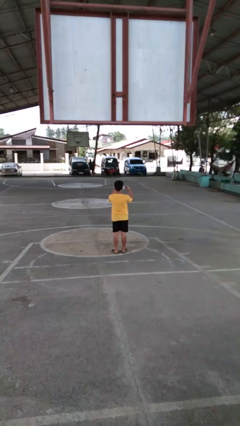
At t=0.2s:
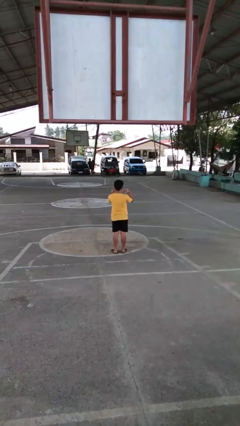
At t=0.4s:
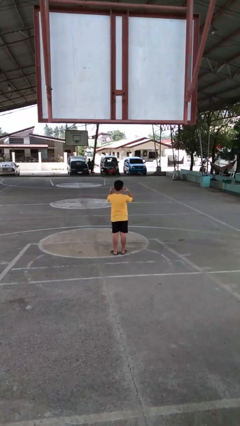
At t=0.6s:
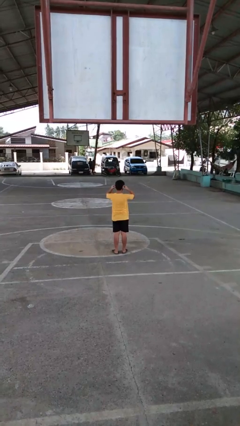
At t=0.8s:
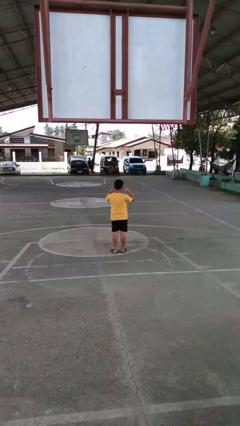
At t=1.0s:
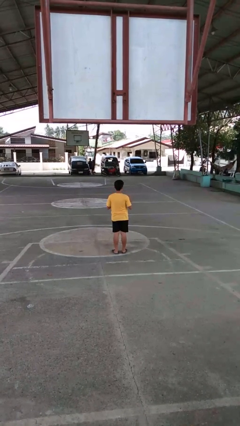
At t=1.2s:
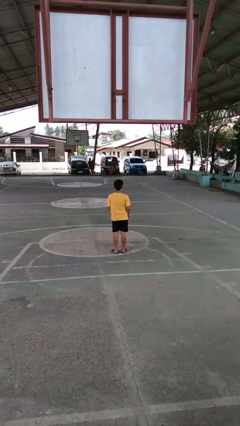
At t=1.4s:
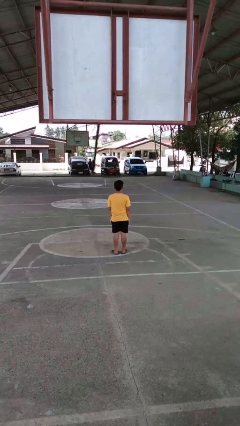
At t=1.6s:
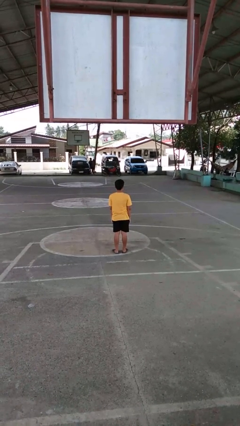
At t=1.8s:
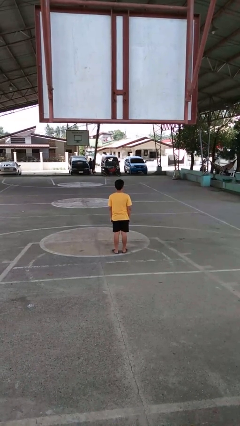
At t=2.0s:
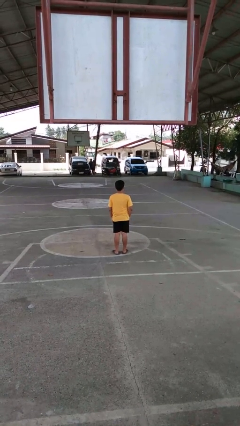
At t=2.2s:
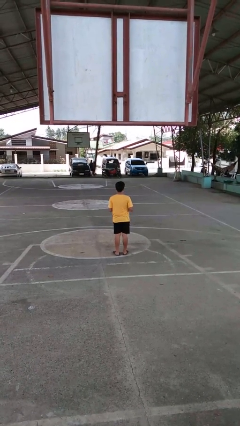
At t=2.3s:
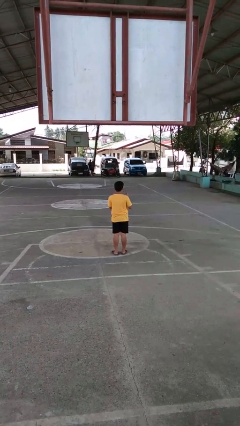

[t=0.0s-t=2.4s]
person puts on facemask

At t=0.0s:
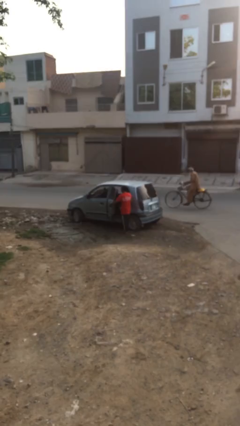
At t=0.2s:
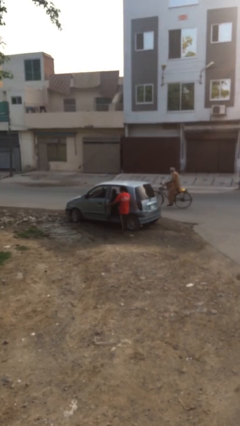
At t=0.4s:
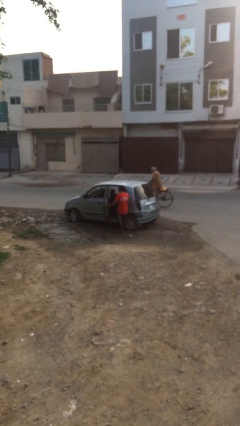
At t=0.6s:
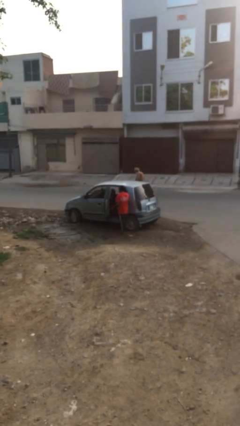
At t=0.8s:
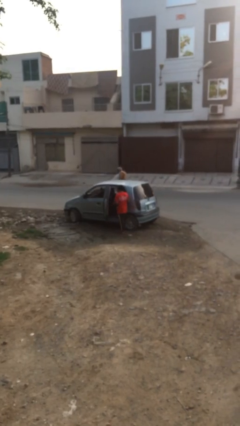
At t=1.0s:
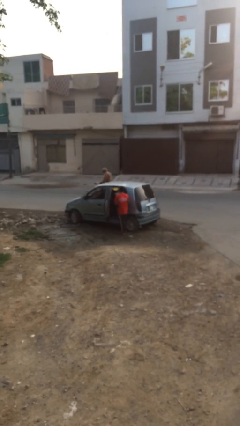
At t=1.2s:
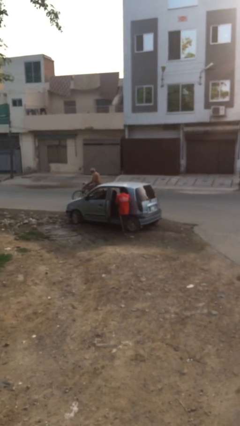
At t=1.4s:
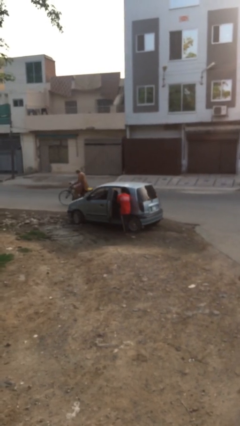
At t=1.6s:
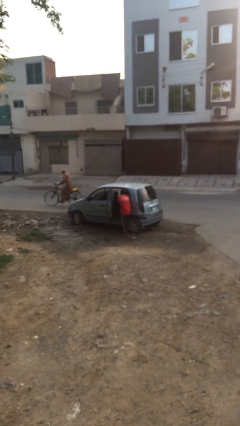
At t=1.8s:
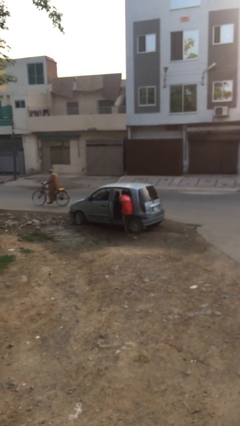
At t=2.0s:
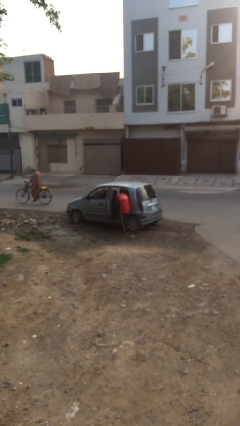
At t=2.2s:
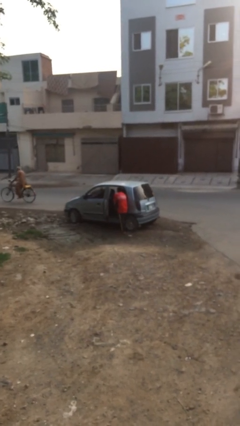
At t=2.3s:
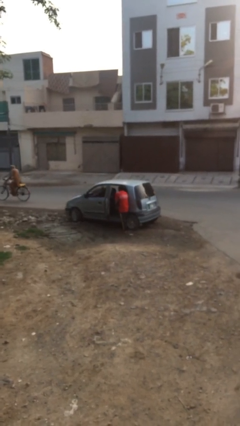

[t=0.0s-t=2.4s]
person loads car

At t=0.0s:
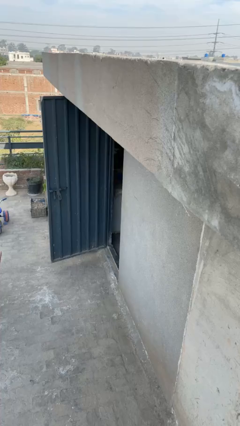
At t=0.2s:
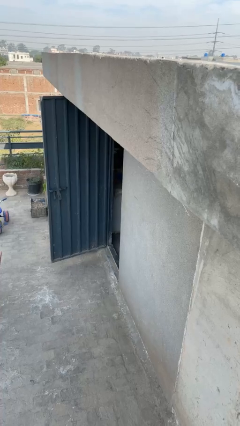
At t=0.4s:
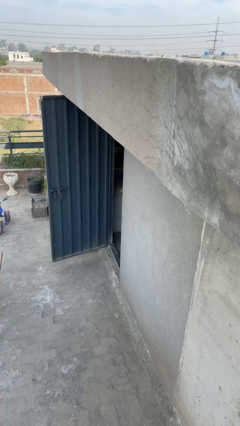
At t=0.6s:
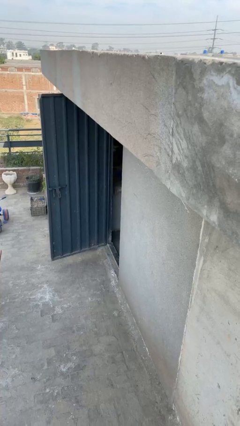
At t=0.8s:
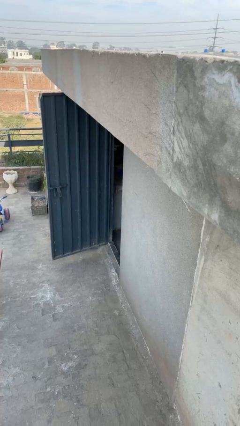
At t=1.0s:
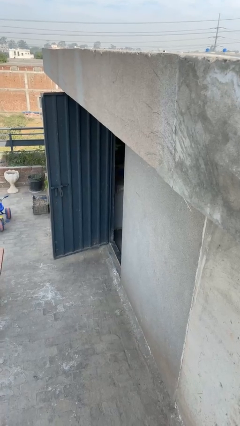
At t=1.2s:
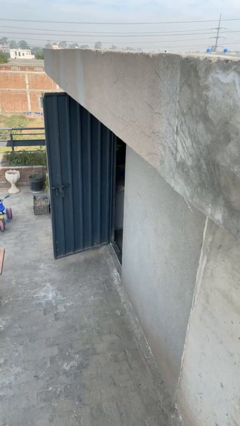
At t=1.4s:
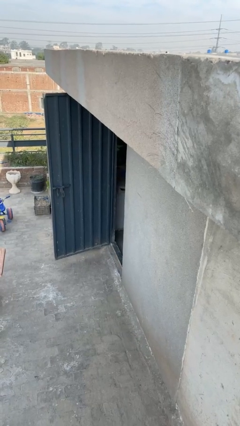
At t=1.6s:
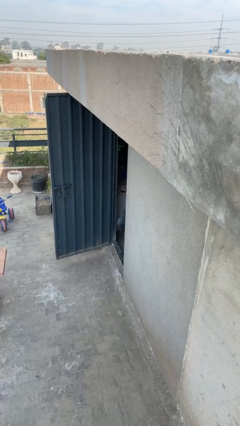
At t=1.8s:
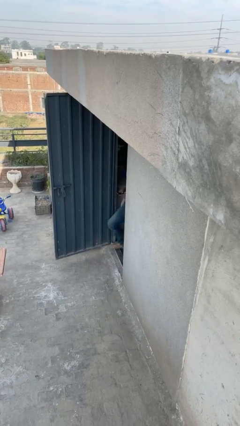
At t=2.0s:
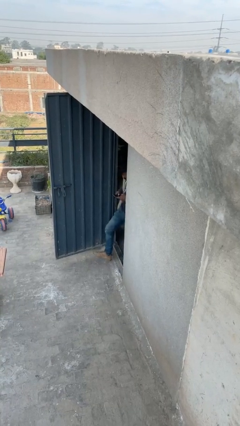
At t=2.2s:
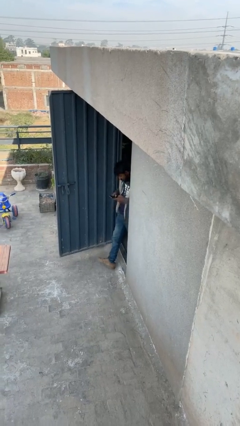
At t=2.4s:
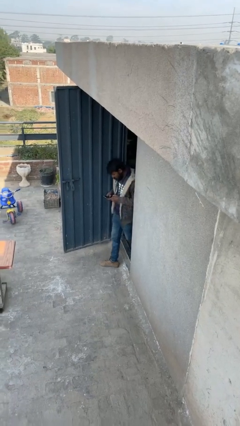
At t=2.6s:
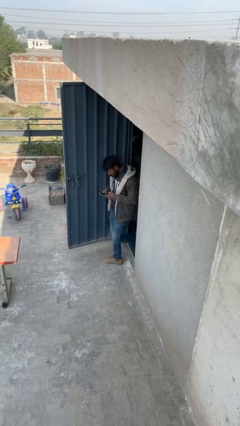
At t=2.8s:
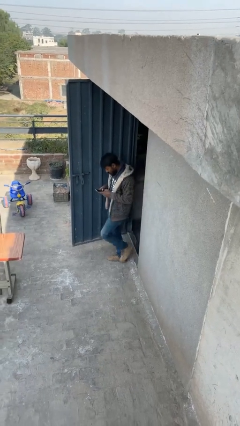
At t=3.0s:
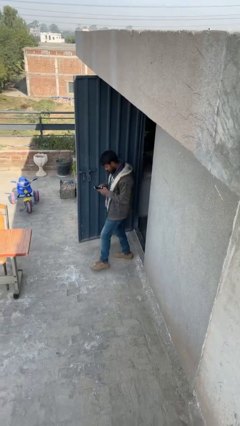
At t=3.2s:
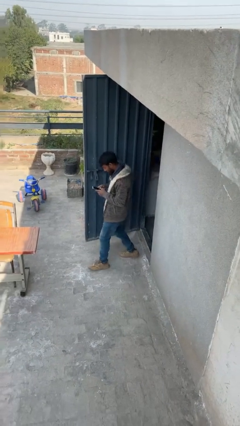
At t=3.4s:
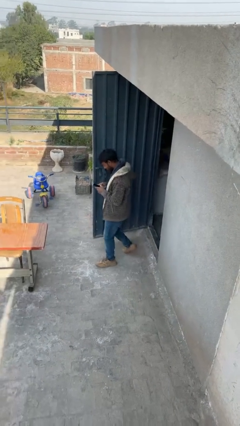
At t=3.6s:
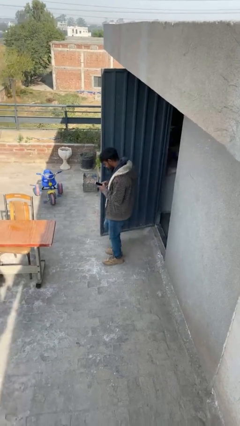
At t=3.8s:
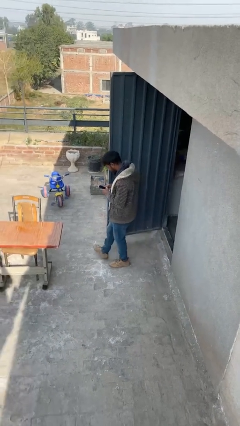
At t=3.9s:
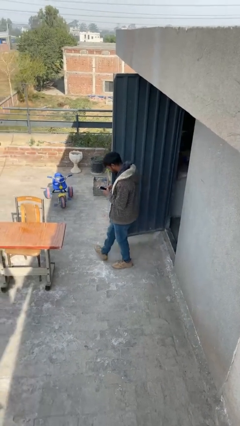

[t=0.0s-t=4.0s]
person enters scene through structure

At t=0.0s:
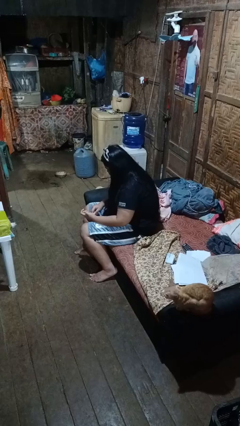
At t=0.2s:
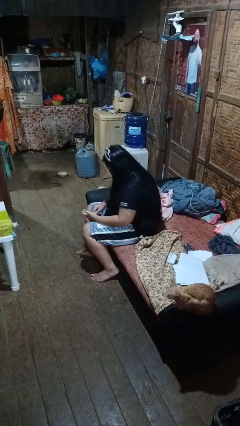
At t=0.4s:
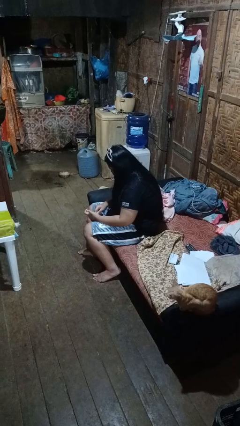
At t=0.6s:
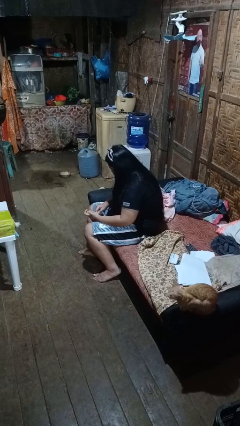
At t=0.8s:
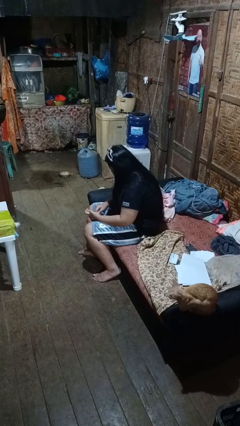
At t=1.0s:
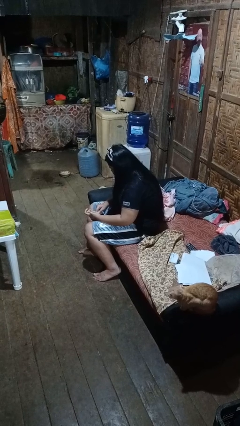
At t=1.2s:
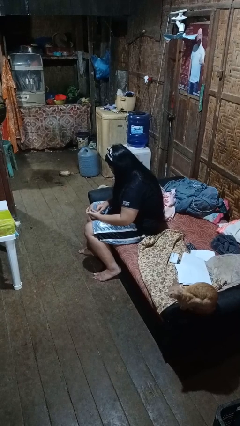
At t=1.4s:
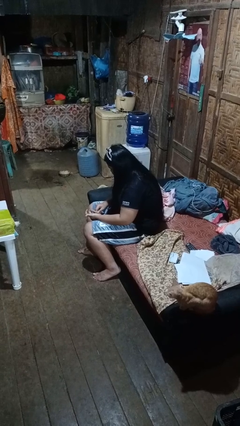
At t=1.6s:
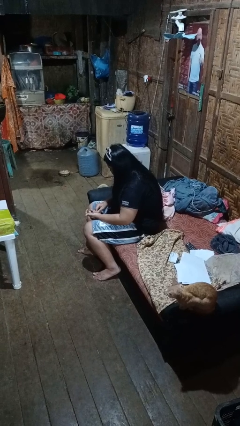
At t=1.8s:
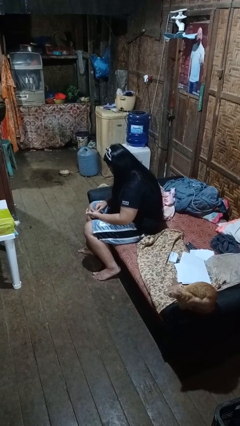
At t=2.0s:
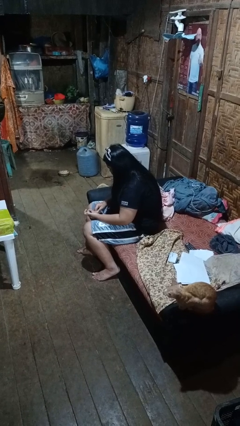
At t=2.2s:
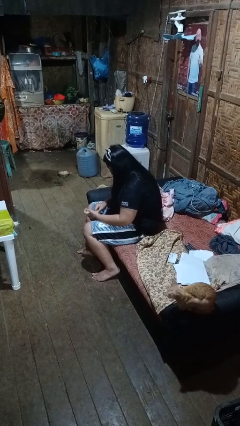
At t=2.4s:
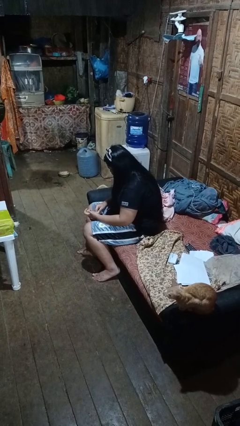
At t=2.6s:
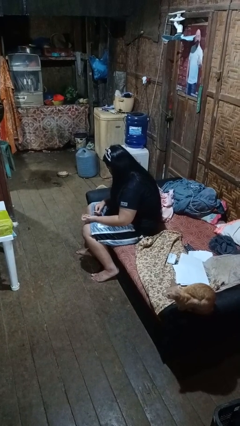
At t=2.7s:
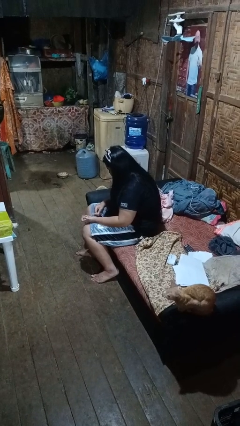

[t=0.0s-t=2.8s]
person files fingernails

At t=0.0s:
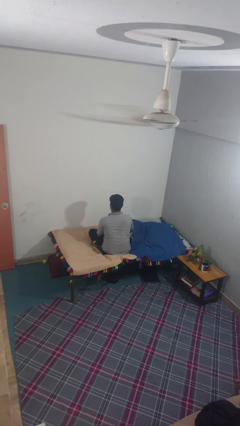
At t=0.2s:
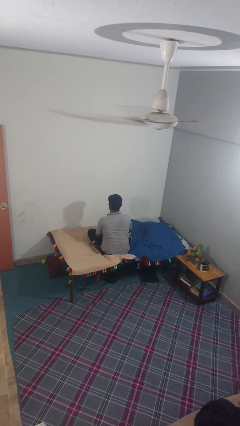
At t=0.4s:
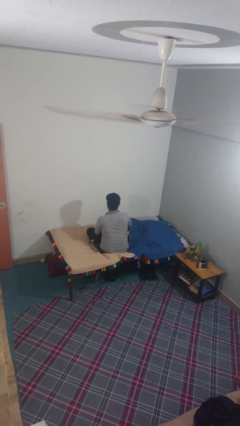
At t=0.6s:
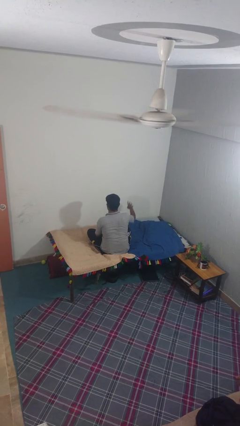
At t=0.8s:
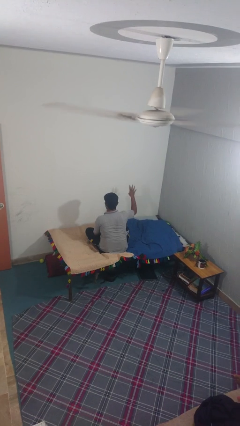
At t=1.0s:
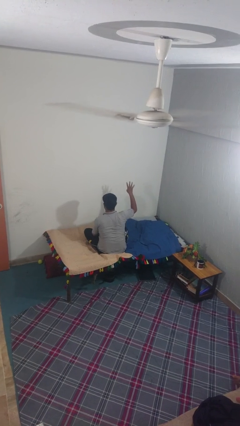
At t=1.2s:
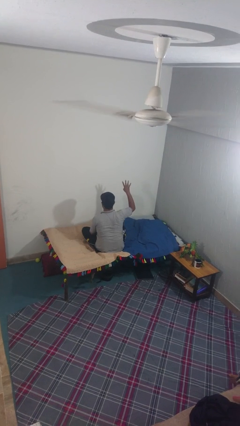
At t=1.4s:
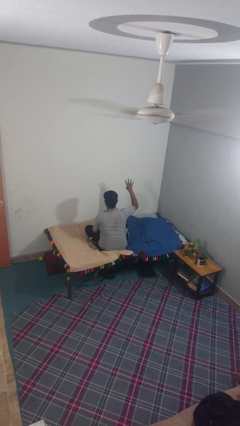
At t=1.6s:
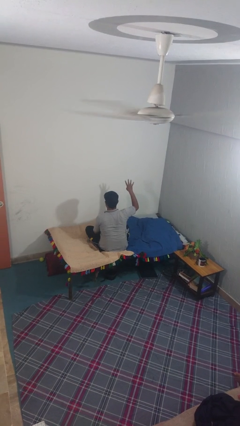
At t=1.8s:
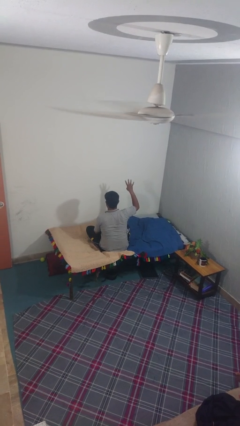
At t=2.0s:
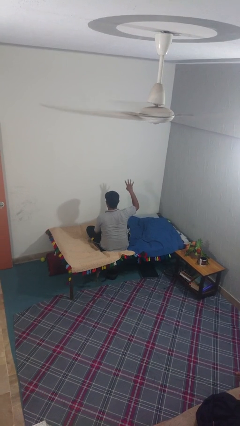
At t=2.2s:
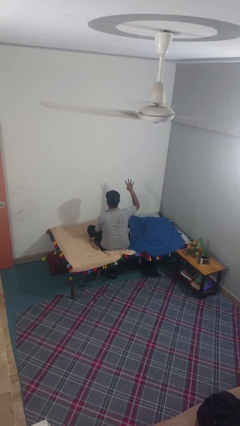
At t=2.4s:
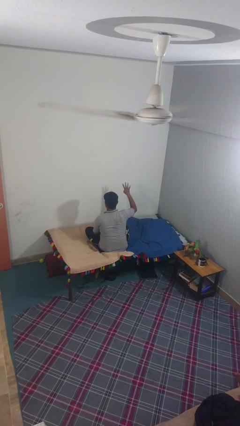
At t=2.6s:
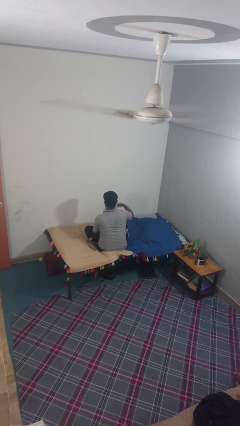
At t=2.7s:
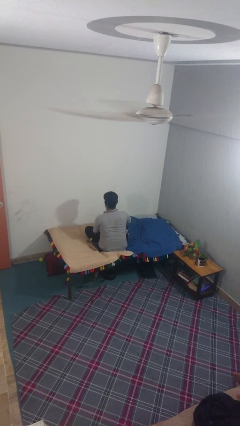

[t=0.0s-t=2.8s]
person gestures number four

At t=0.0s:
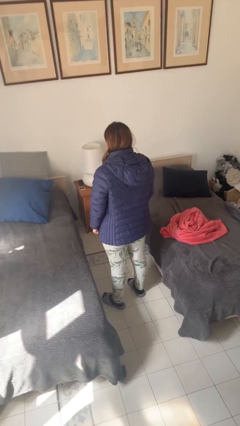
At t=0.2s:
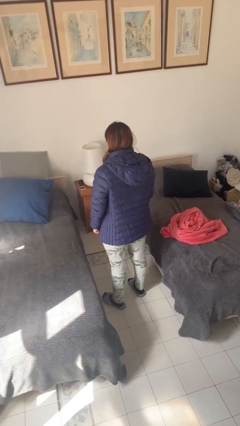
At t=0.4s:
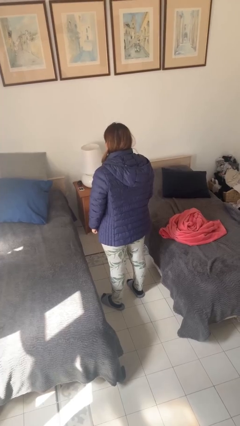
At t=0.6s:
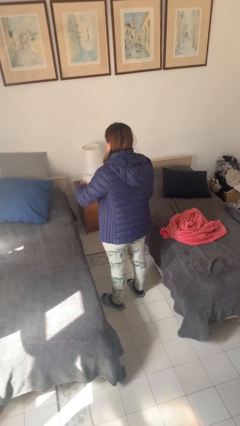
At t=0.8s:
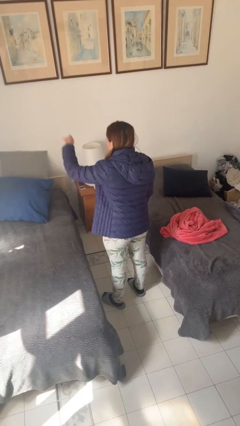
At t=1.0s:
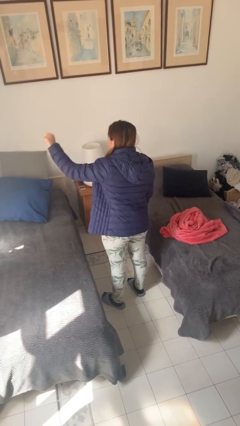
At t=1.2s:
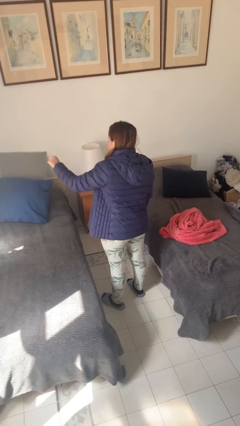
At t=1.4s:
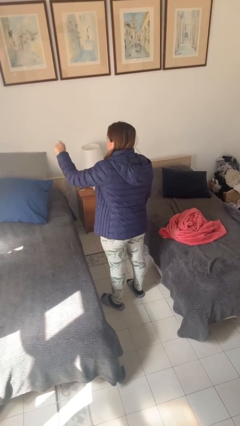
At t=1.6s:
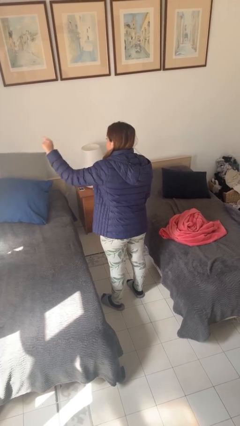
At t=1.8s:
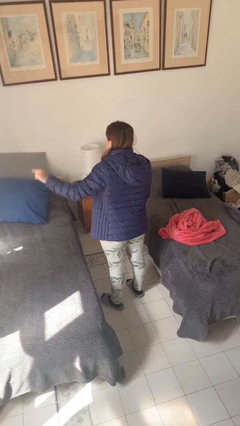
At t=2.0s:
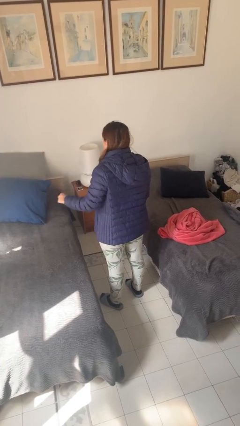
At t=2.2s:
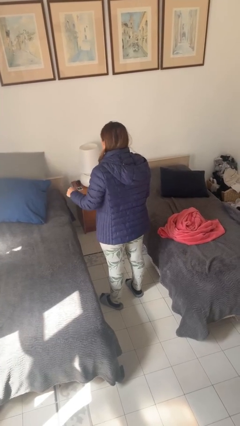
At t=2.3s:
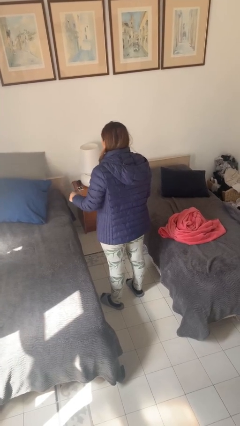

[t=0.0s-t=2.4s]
person gestures number three

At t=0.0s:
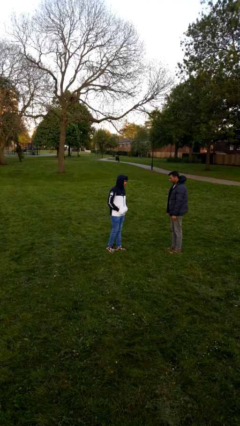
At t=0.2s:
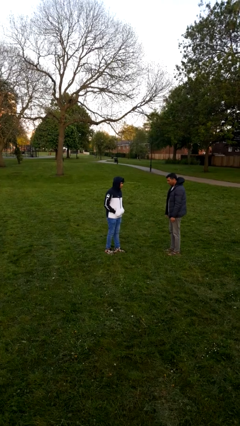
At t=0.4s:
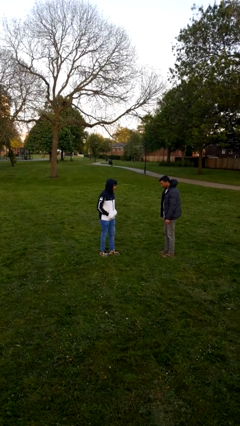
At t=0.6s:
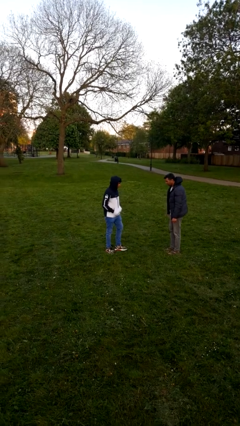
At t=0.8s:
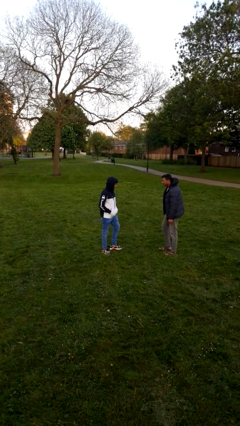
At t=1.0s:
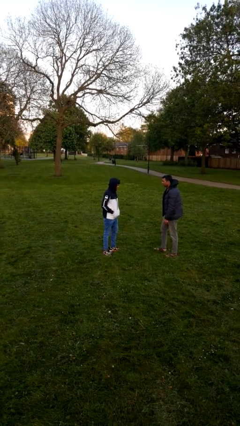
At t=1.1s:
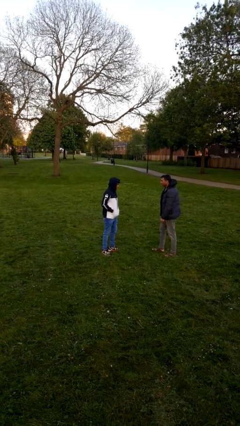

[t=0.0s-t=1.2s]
person highfives hand
